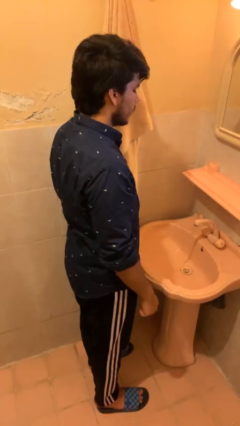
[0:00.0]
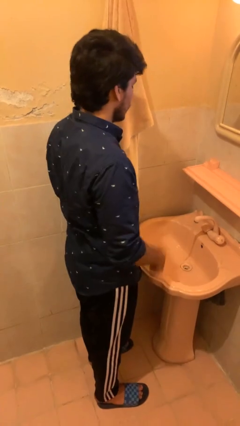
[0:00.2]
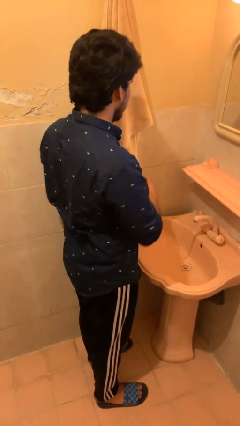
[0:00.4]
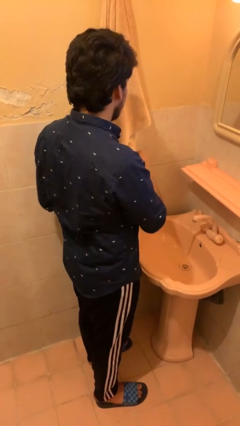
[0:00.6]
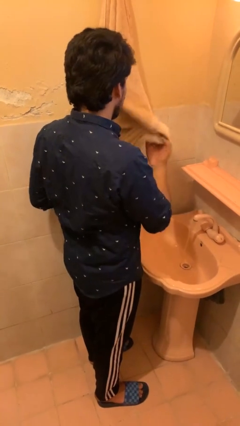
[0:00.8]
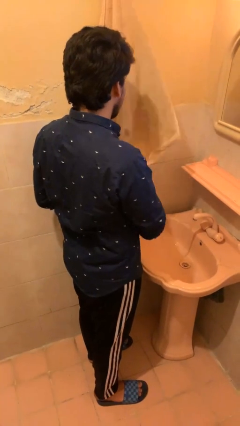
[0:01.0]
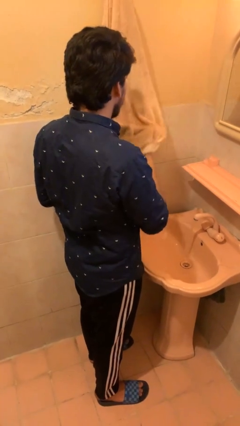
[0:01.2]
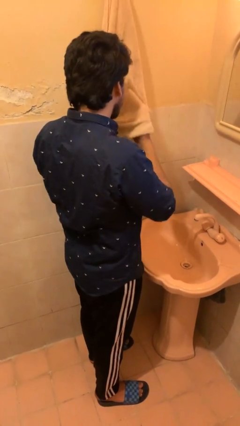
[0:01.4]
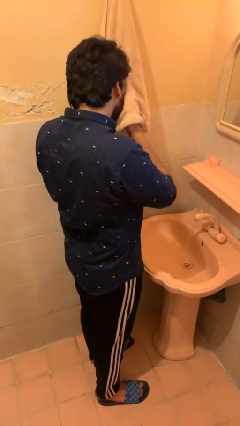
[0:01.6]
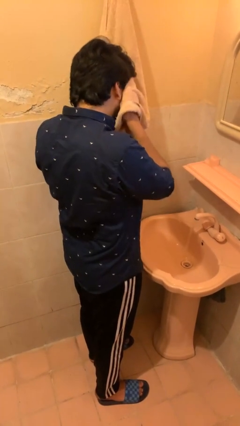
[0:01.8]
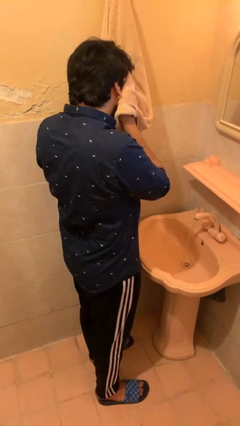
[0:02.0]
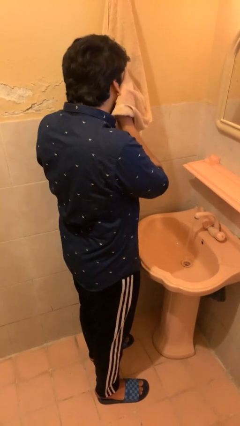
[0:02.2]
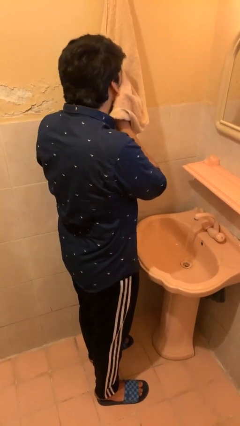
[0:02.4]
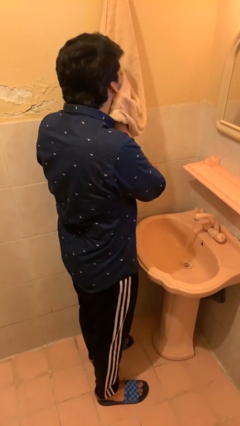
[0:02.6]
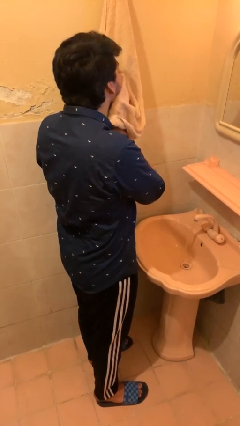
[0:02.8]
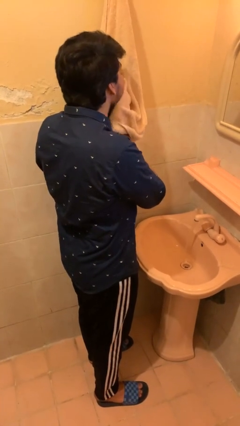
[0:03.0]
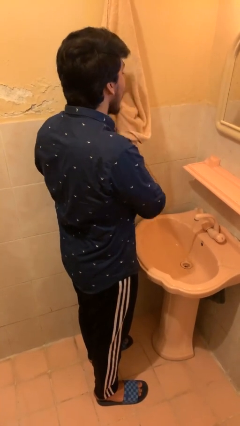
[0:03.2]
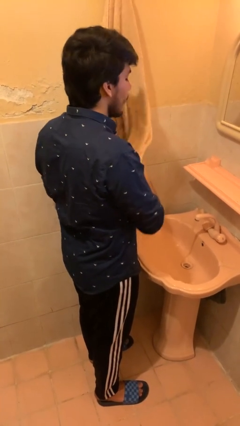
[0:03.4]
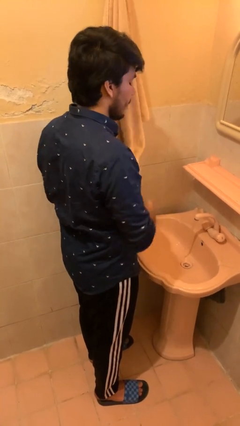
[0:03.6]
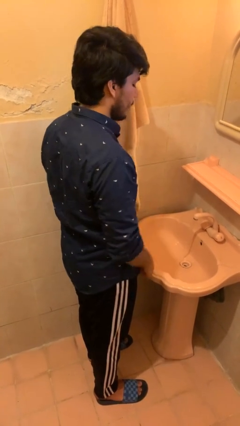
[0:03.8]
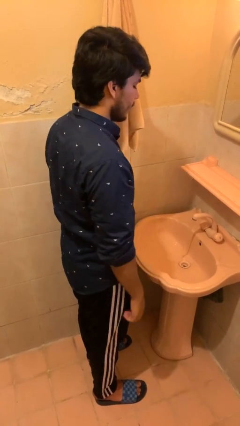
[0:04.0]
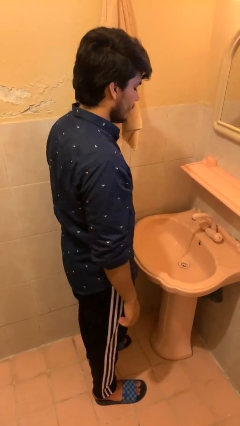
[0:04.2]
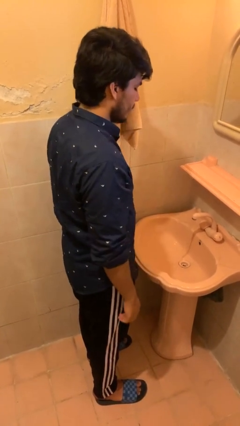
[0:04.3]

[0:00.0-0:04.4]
person dries face with towel

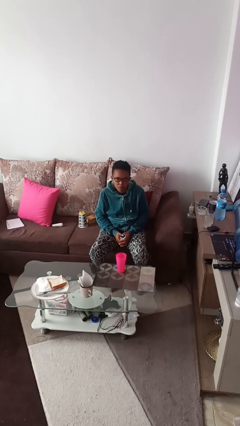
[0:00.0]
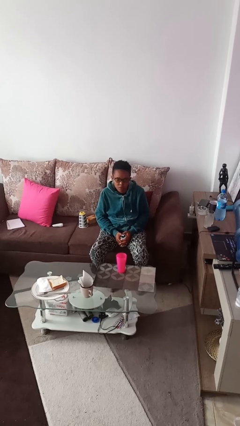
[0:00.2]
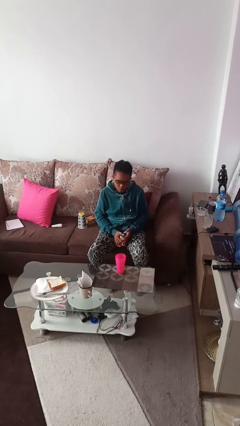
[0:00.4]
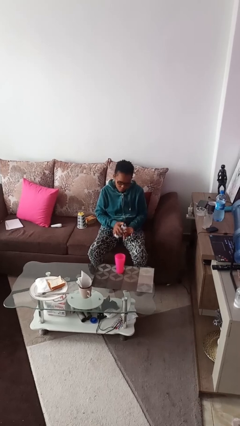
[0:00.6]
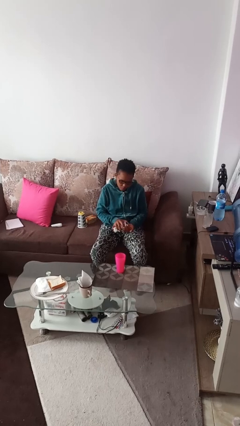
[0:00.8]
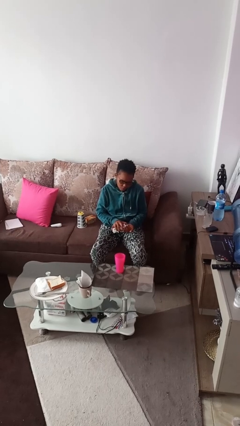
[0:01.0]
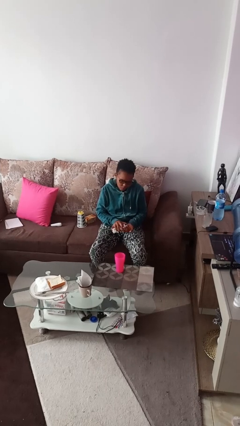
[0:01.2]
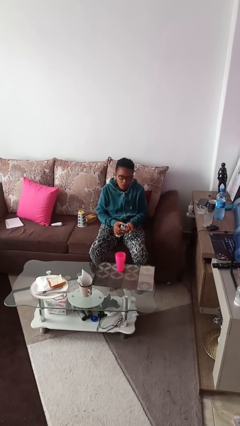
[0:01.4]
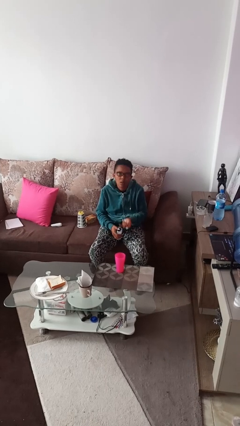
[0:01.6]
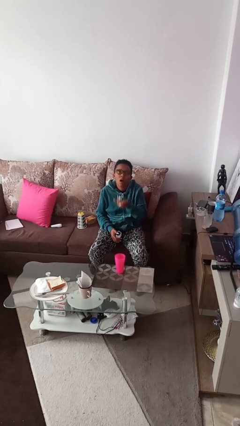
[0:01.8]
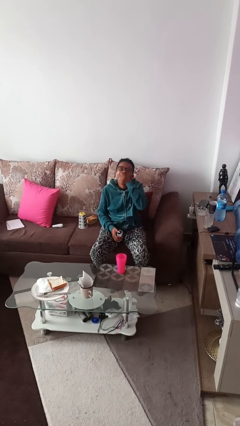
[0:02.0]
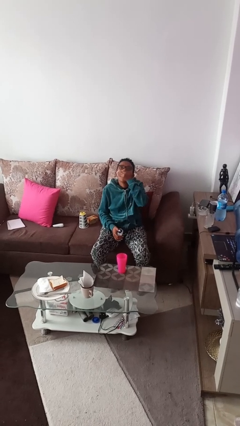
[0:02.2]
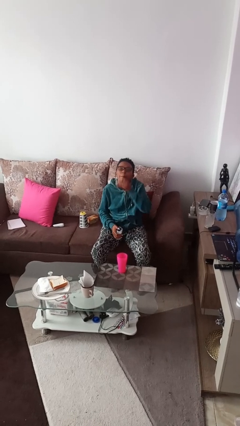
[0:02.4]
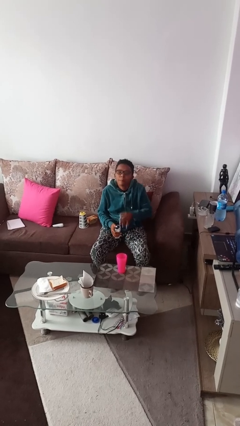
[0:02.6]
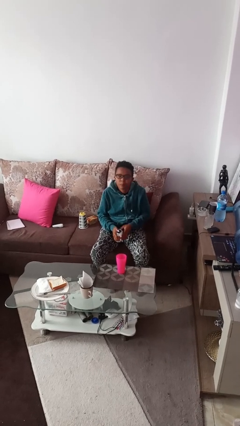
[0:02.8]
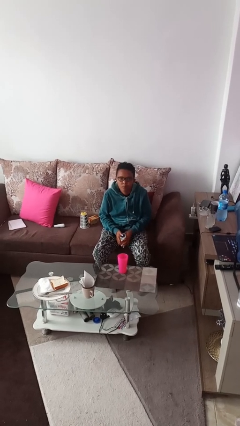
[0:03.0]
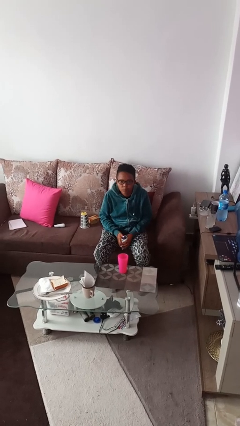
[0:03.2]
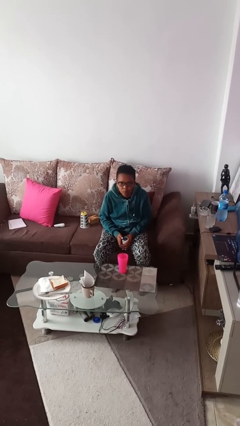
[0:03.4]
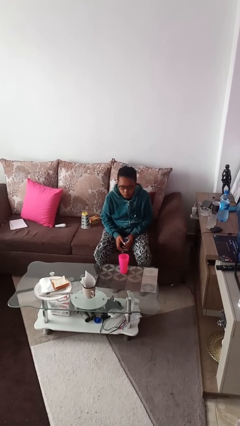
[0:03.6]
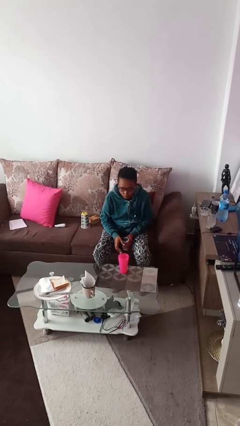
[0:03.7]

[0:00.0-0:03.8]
person takes medicine pills

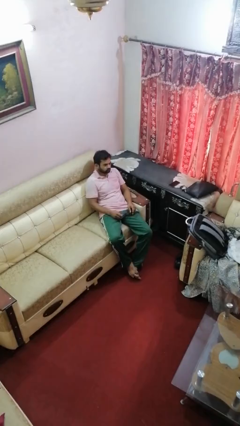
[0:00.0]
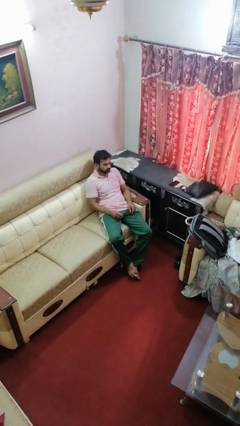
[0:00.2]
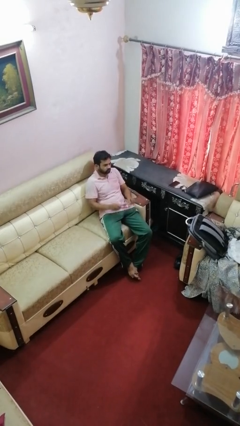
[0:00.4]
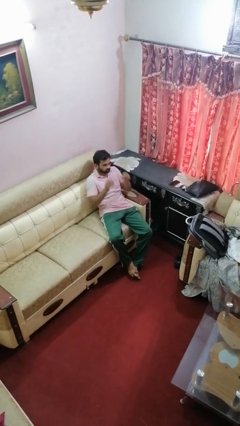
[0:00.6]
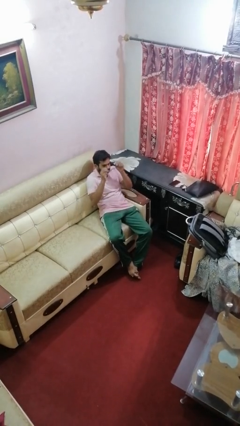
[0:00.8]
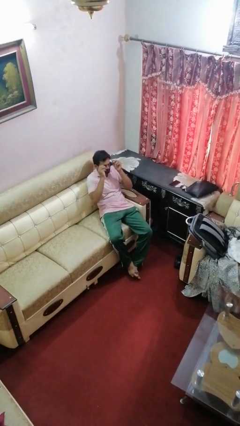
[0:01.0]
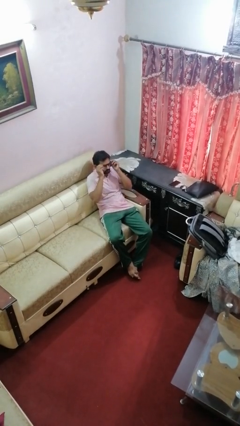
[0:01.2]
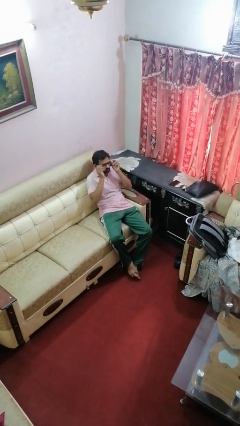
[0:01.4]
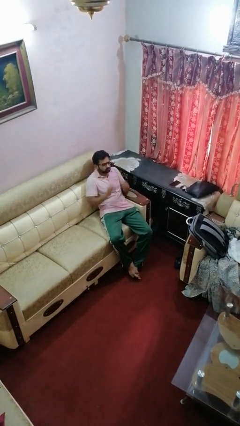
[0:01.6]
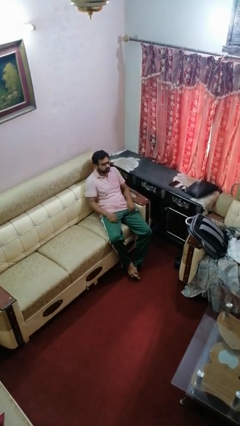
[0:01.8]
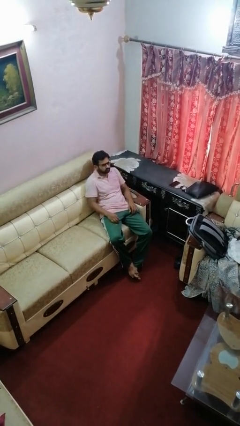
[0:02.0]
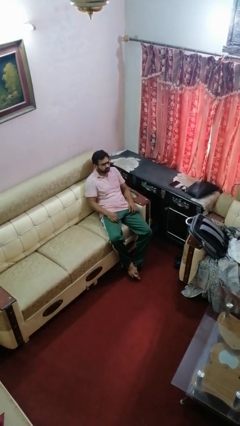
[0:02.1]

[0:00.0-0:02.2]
person puts on glasses

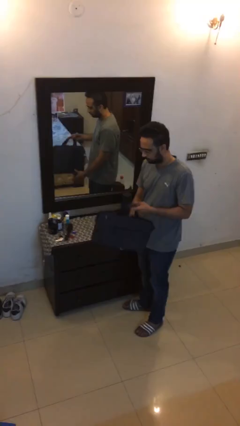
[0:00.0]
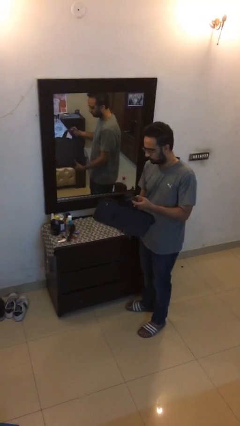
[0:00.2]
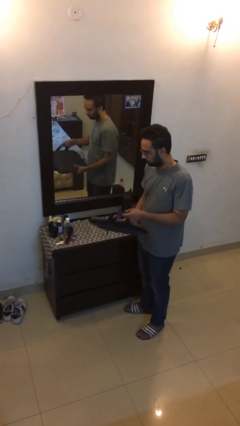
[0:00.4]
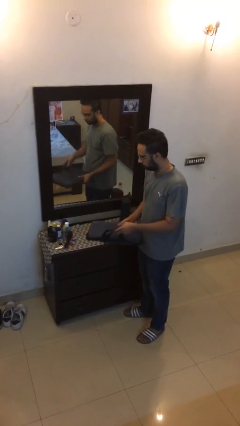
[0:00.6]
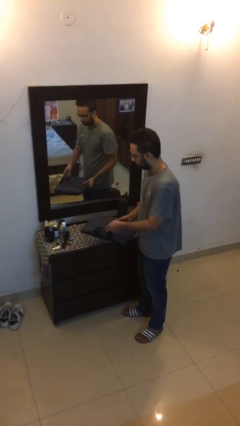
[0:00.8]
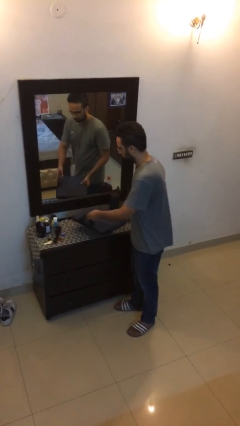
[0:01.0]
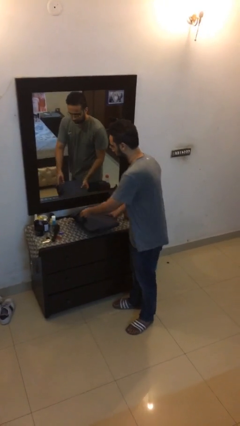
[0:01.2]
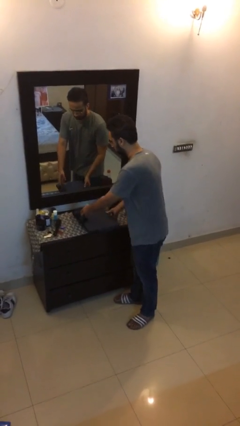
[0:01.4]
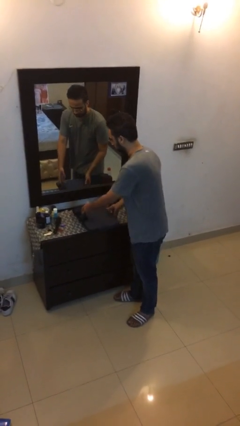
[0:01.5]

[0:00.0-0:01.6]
person puts down object on table

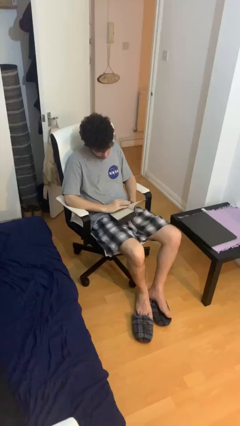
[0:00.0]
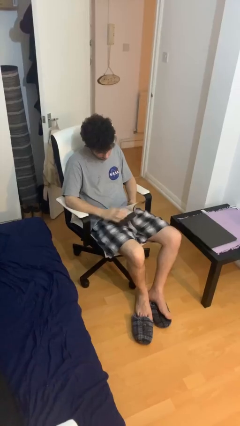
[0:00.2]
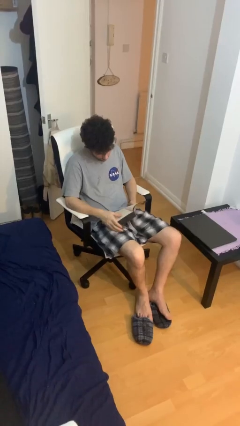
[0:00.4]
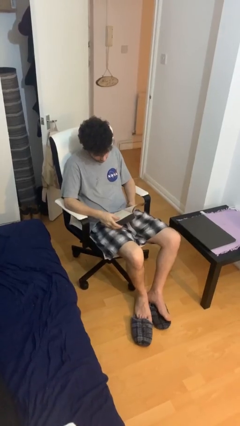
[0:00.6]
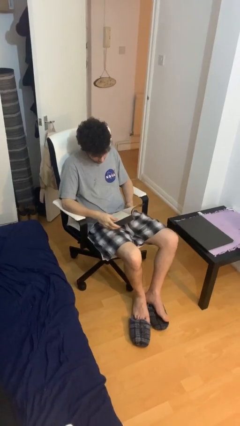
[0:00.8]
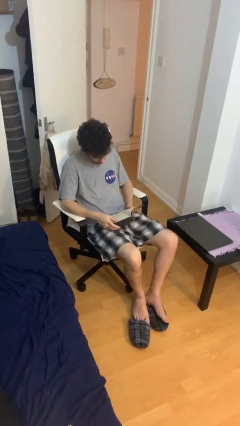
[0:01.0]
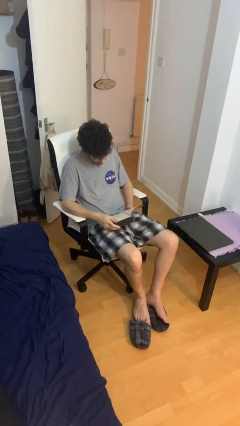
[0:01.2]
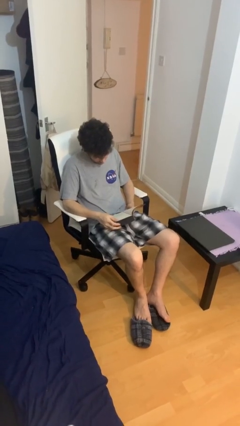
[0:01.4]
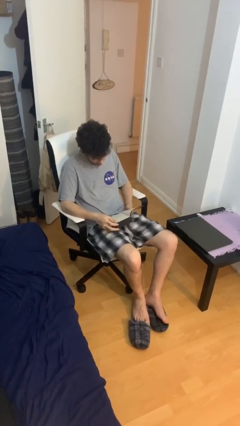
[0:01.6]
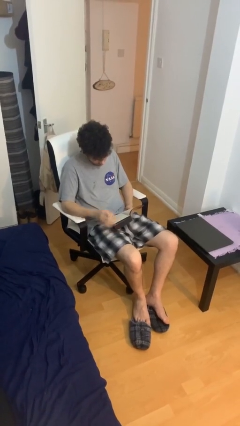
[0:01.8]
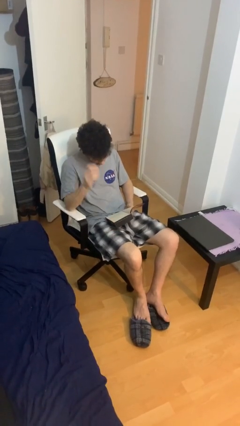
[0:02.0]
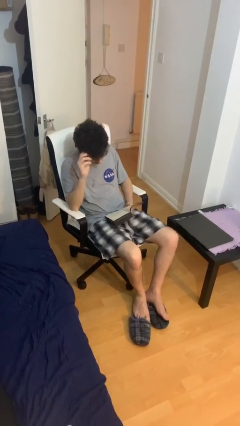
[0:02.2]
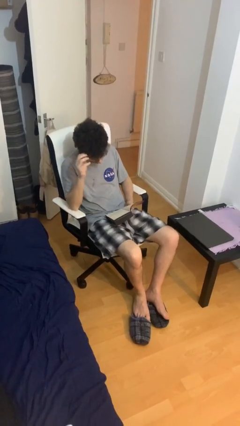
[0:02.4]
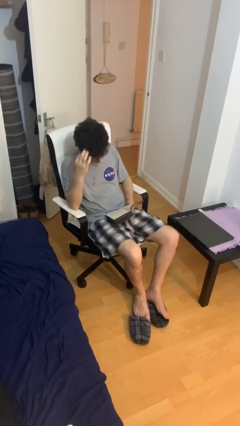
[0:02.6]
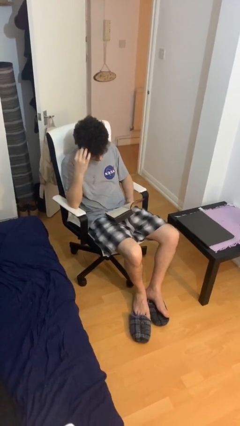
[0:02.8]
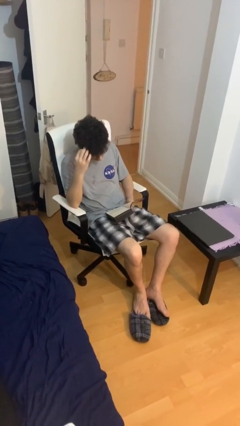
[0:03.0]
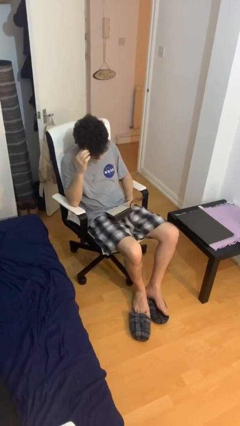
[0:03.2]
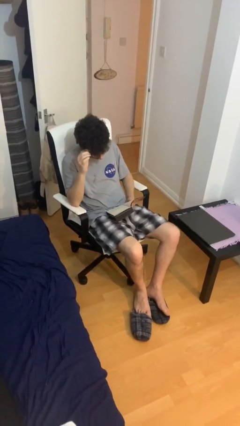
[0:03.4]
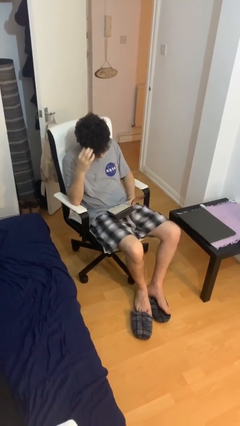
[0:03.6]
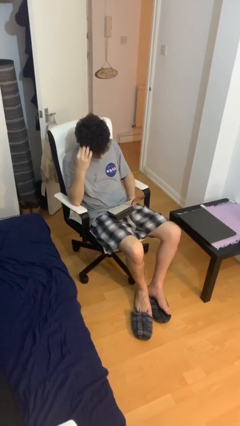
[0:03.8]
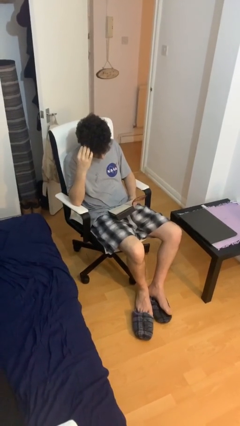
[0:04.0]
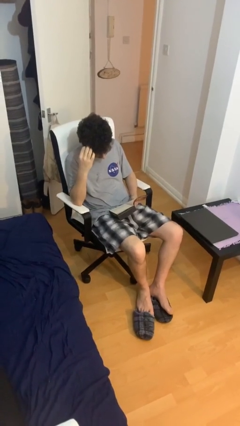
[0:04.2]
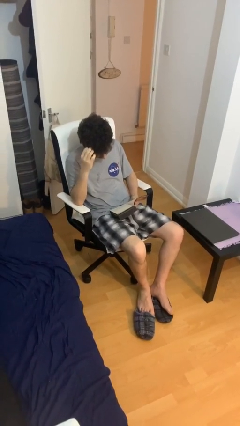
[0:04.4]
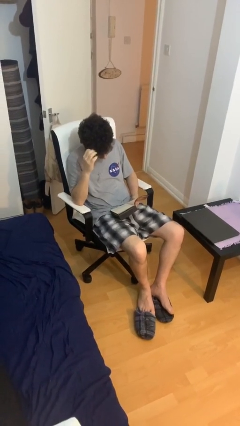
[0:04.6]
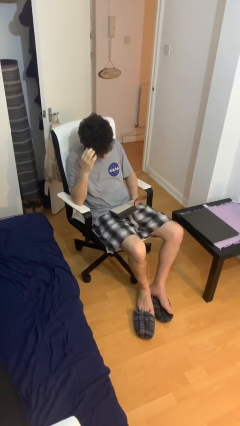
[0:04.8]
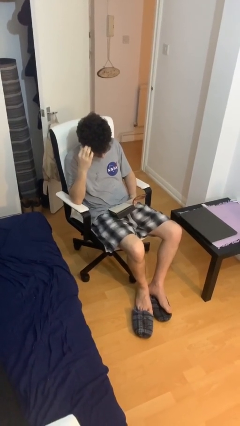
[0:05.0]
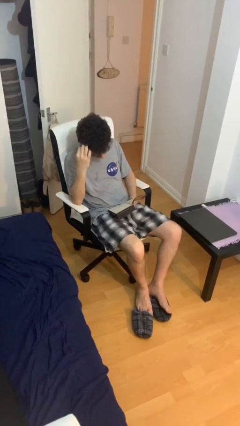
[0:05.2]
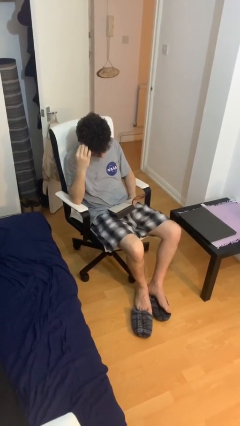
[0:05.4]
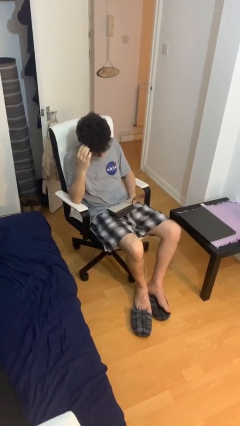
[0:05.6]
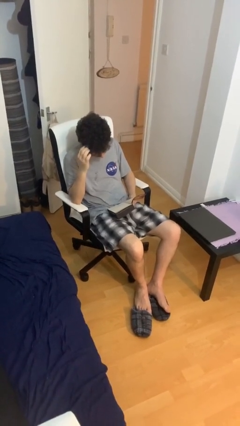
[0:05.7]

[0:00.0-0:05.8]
person reads document
